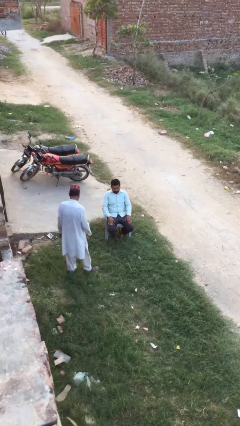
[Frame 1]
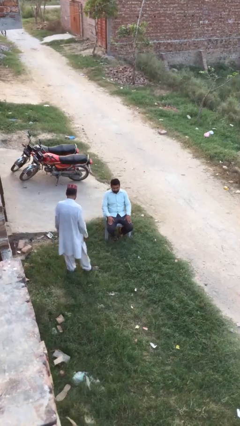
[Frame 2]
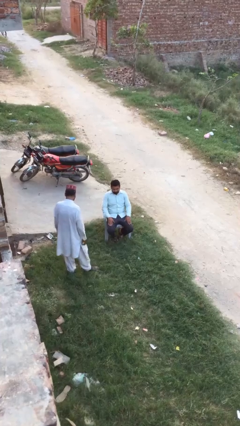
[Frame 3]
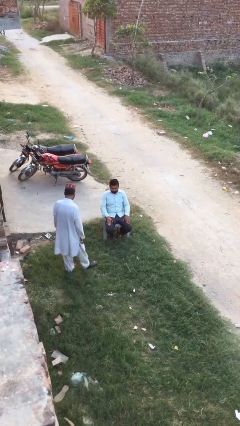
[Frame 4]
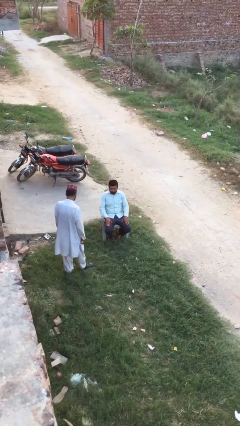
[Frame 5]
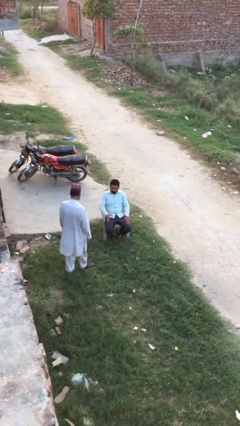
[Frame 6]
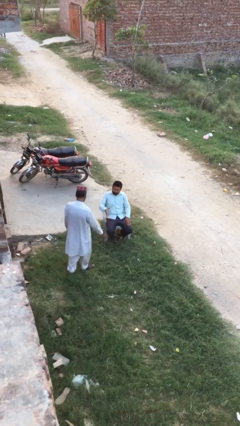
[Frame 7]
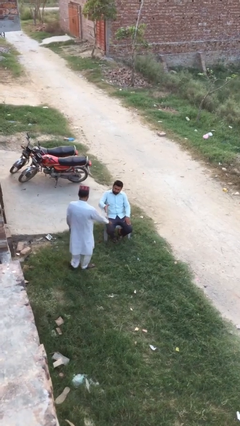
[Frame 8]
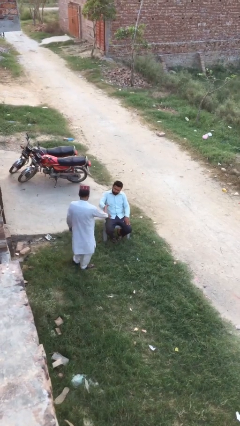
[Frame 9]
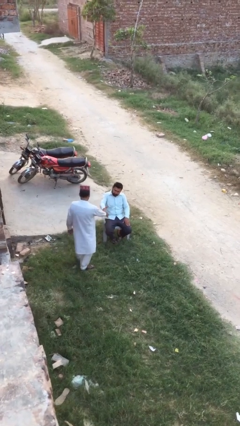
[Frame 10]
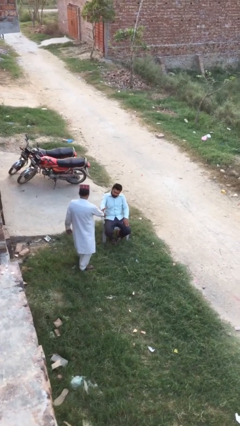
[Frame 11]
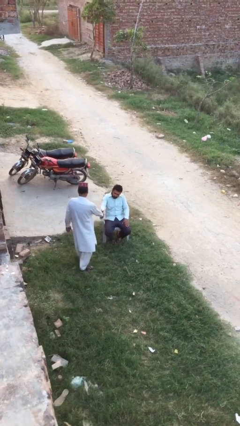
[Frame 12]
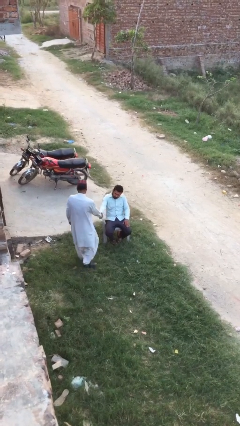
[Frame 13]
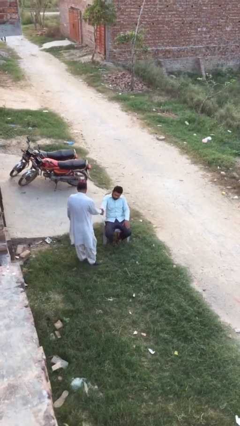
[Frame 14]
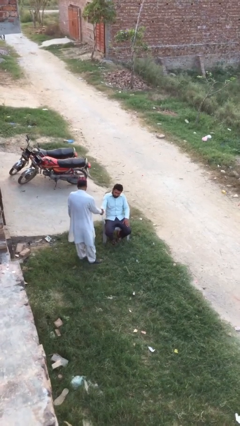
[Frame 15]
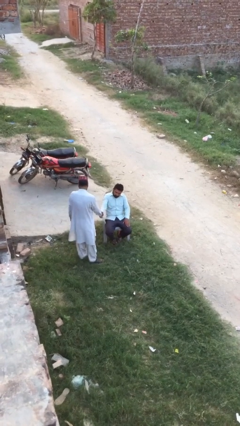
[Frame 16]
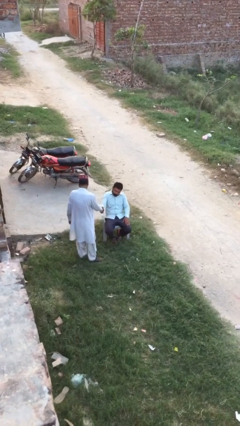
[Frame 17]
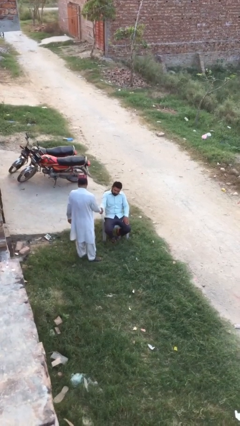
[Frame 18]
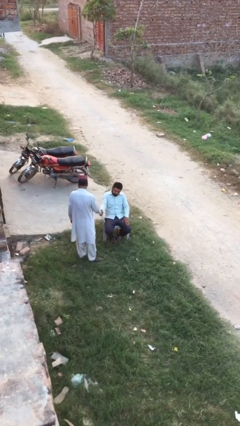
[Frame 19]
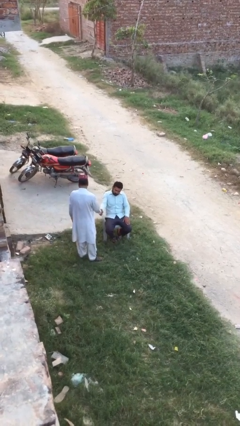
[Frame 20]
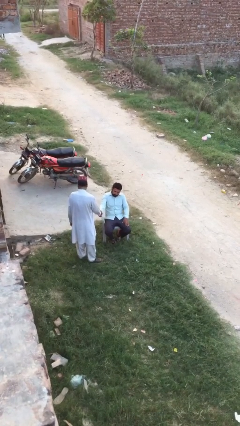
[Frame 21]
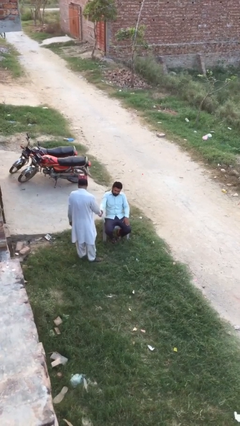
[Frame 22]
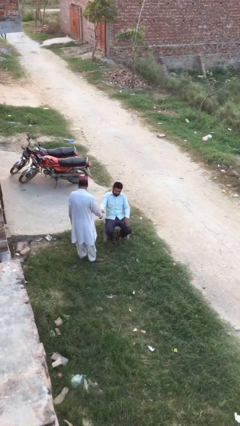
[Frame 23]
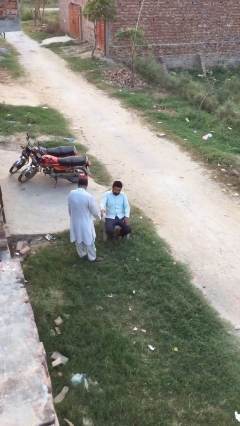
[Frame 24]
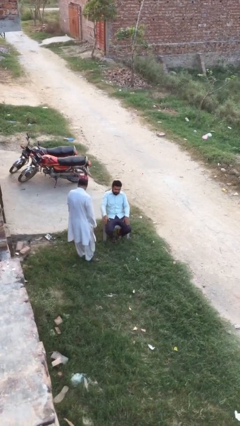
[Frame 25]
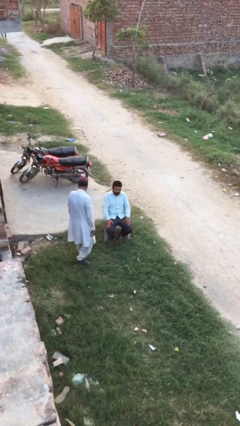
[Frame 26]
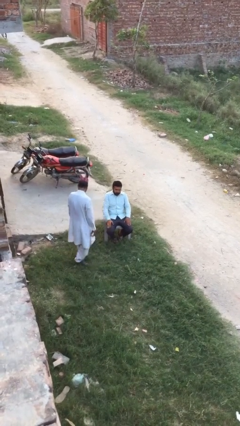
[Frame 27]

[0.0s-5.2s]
person shakes hand

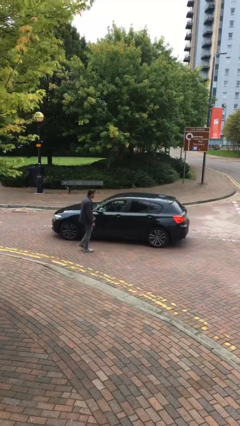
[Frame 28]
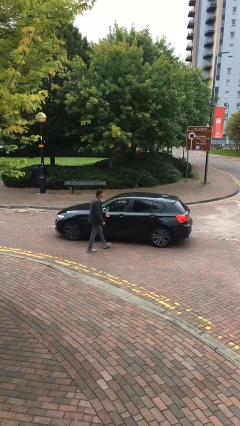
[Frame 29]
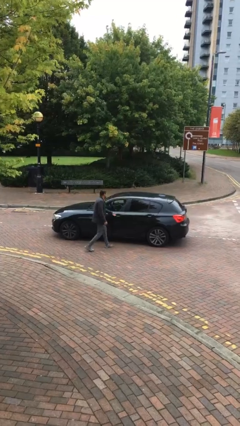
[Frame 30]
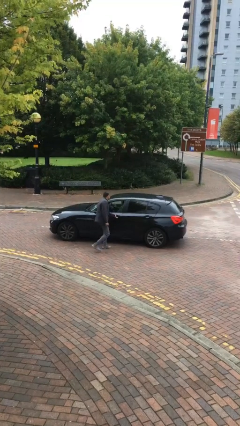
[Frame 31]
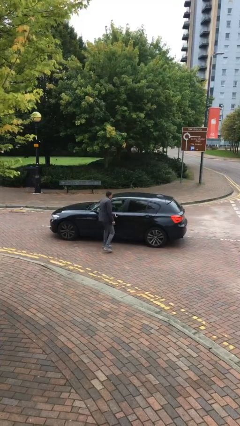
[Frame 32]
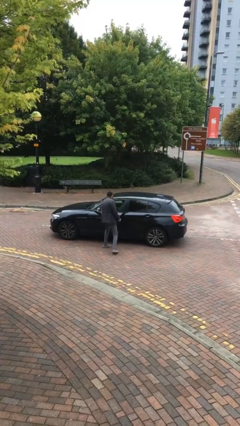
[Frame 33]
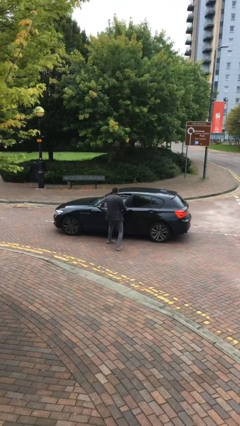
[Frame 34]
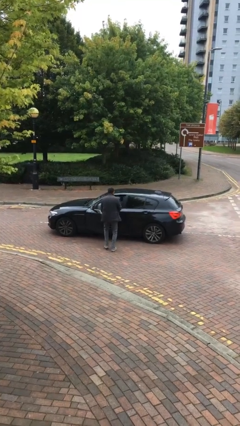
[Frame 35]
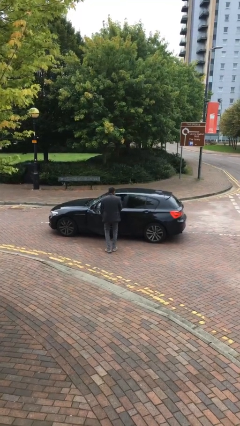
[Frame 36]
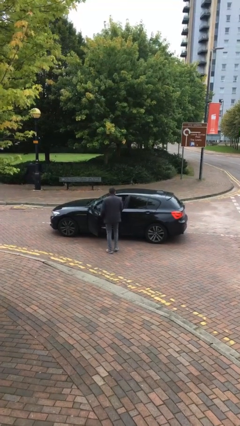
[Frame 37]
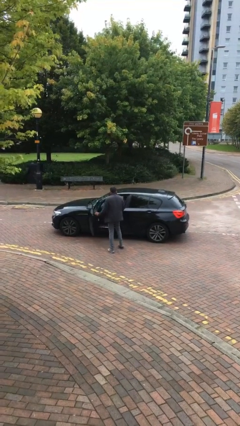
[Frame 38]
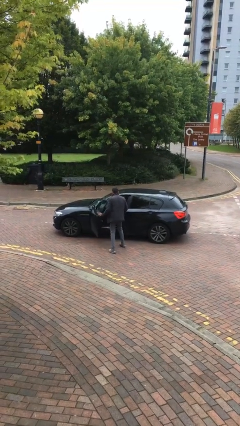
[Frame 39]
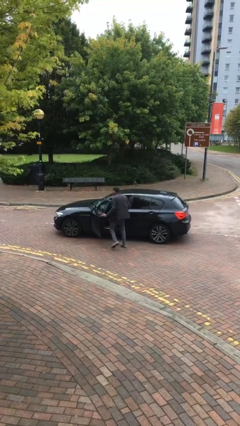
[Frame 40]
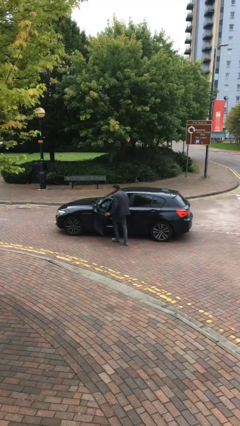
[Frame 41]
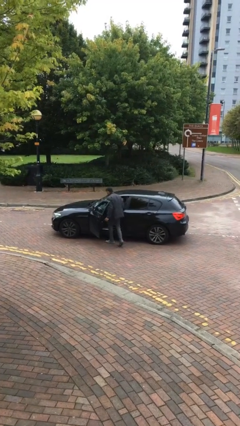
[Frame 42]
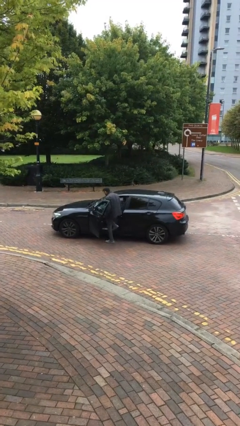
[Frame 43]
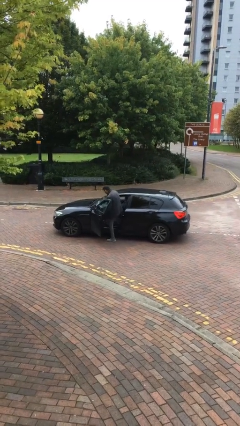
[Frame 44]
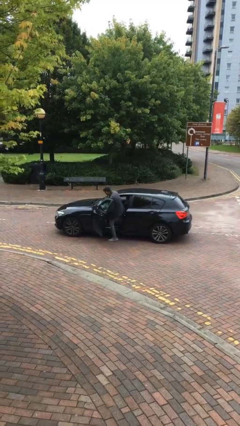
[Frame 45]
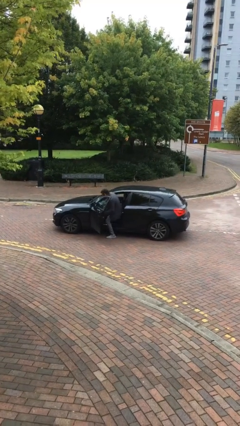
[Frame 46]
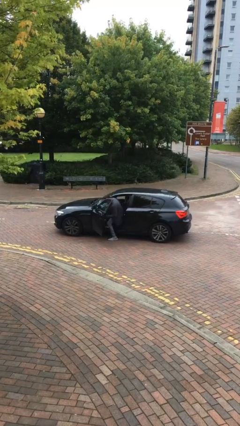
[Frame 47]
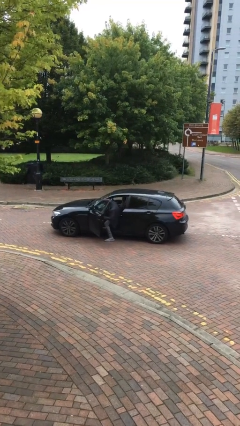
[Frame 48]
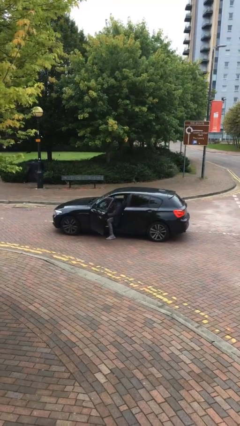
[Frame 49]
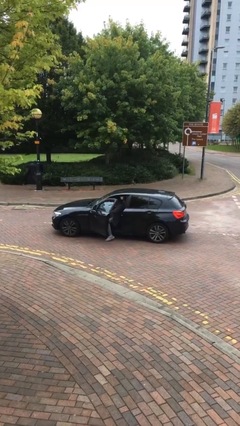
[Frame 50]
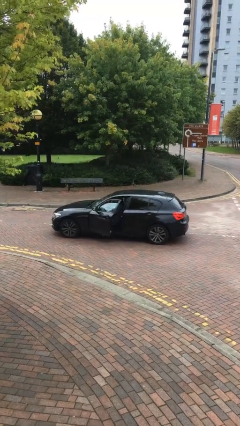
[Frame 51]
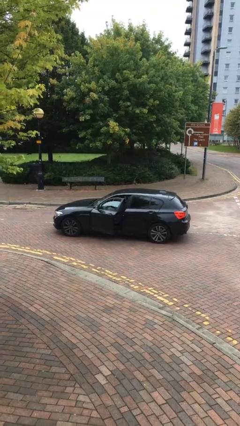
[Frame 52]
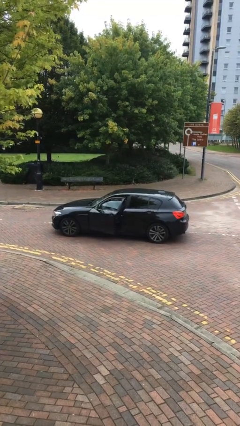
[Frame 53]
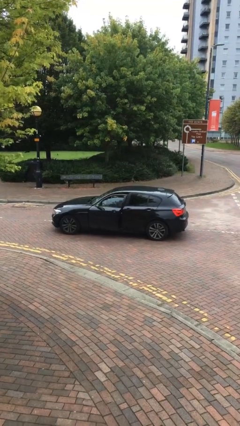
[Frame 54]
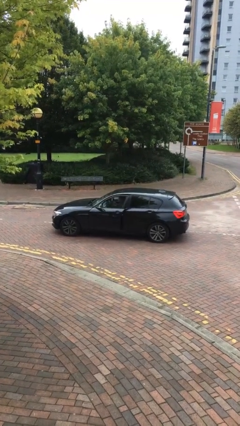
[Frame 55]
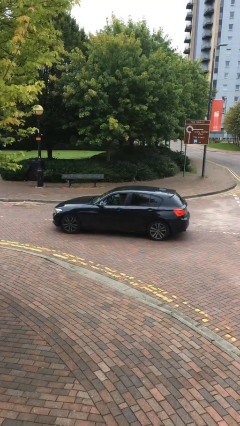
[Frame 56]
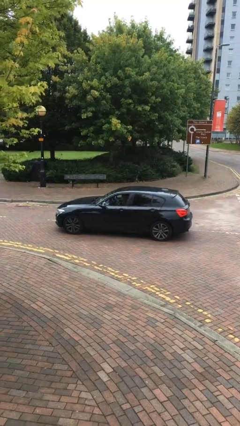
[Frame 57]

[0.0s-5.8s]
car picks up person

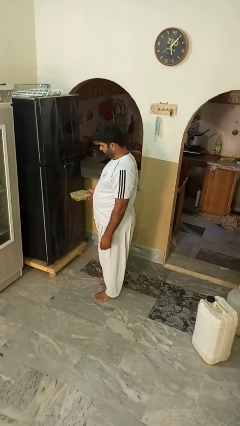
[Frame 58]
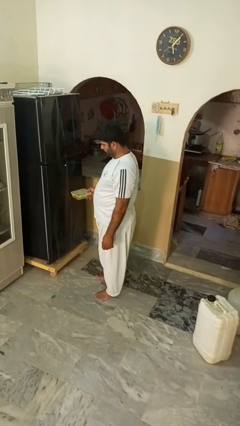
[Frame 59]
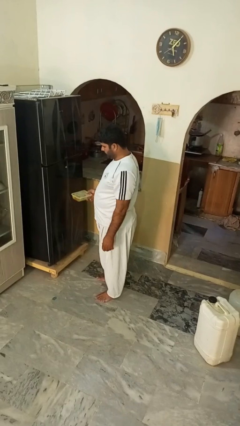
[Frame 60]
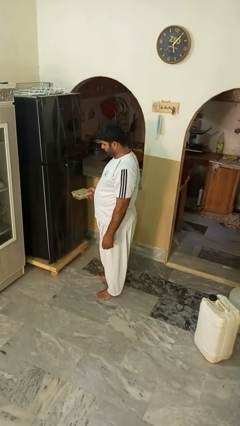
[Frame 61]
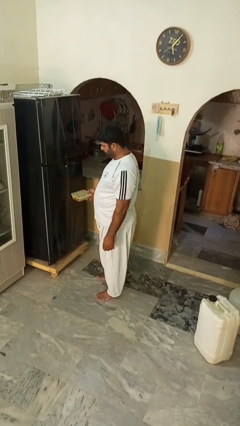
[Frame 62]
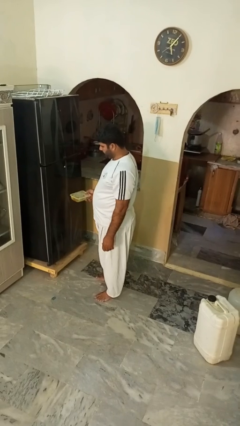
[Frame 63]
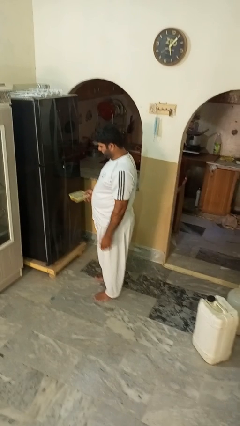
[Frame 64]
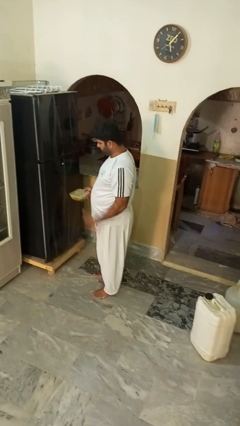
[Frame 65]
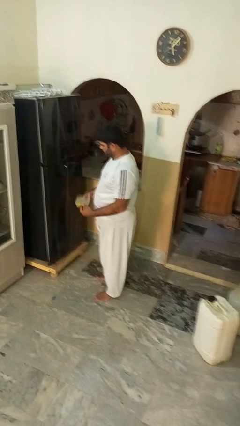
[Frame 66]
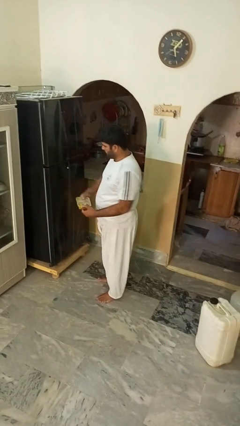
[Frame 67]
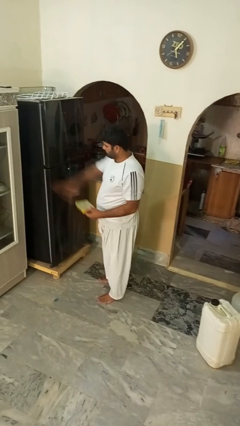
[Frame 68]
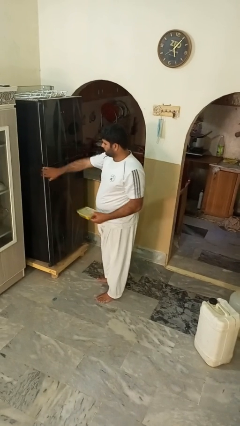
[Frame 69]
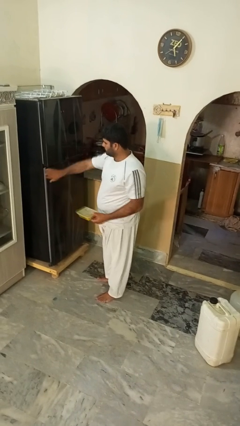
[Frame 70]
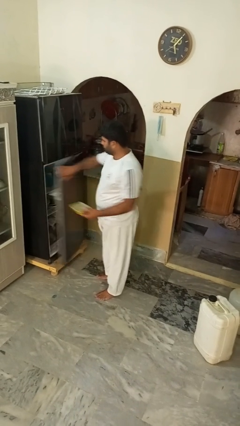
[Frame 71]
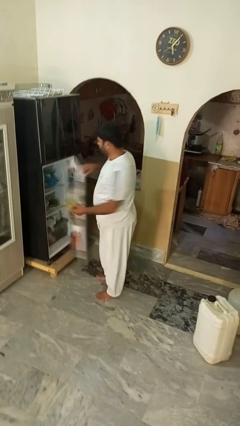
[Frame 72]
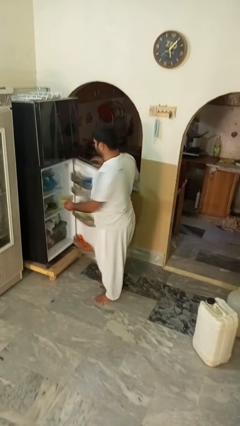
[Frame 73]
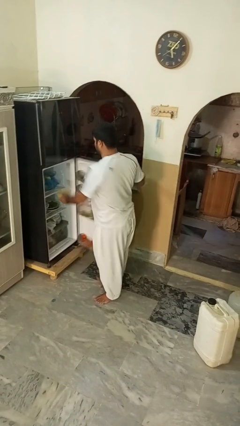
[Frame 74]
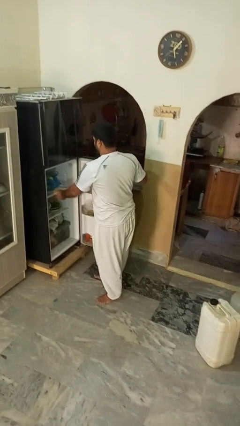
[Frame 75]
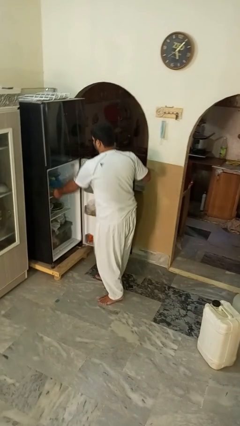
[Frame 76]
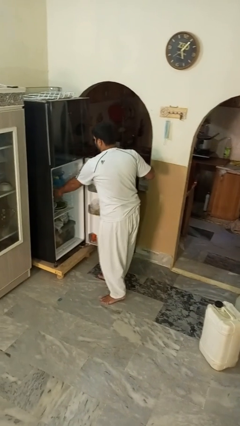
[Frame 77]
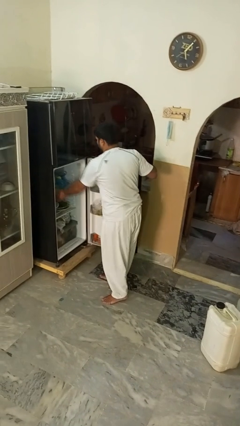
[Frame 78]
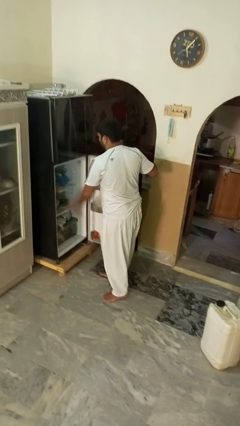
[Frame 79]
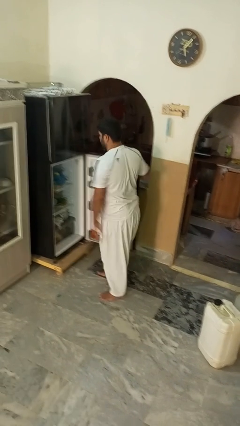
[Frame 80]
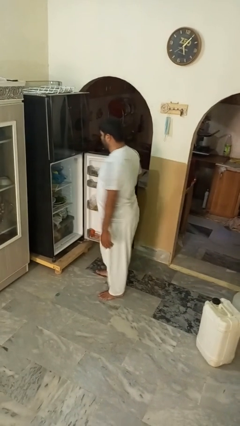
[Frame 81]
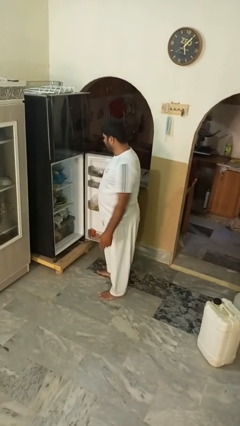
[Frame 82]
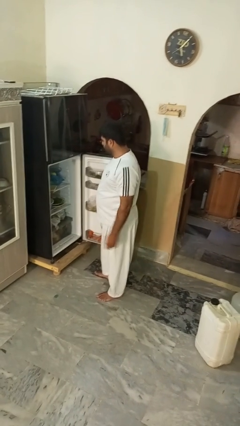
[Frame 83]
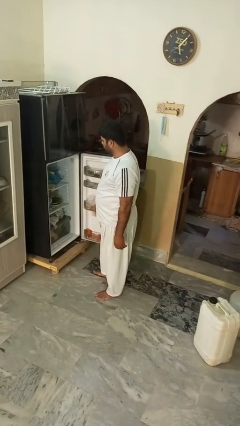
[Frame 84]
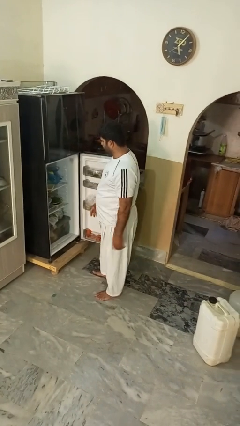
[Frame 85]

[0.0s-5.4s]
person puts object into refrigerator

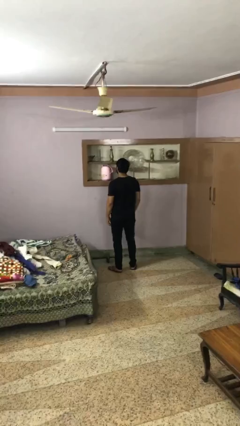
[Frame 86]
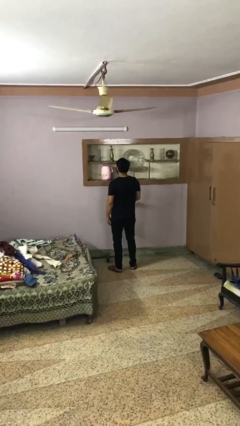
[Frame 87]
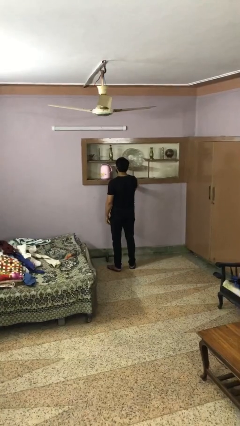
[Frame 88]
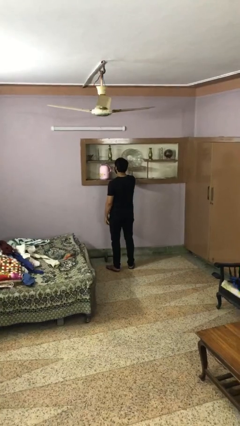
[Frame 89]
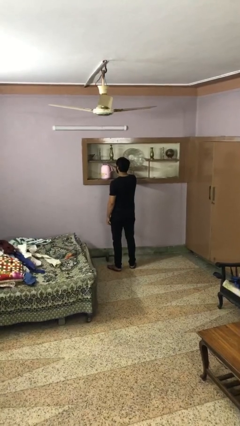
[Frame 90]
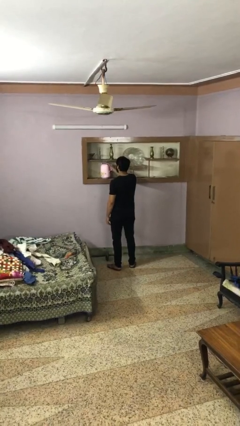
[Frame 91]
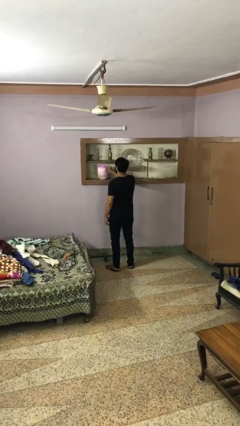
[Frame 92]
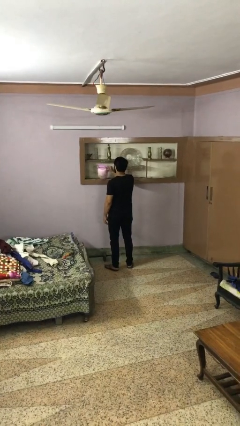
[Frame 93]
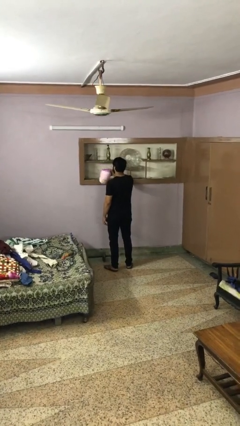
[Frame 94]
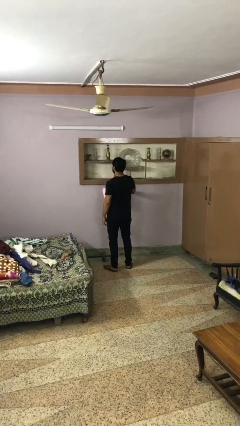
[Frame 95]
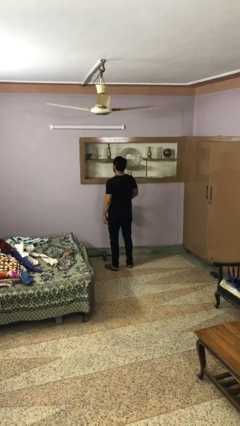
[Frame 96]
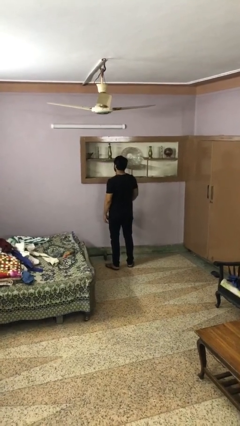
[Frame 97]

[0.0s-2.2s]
person picks up object from countertop
